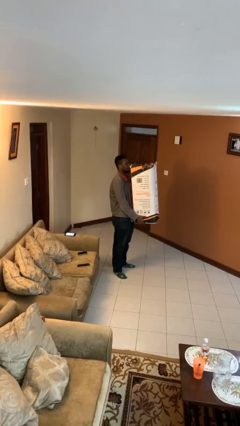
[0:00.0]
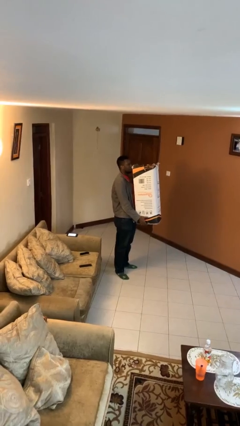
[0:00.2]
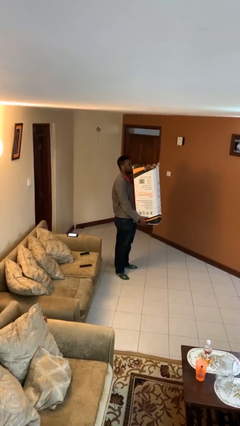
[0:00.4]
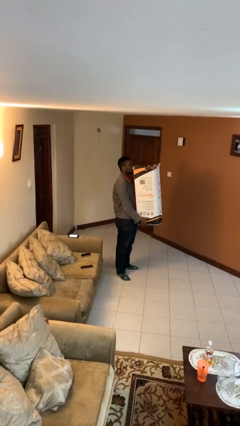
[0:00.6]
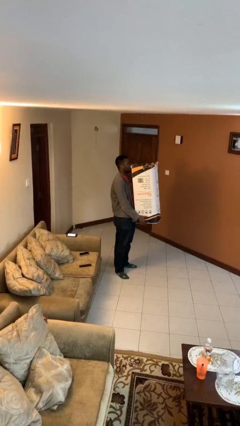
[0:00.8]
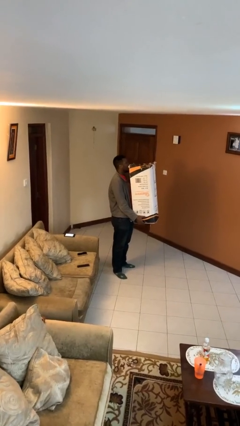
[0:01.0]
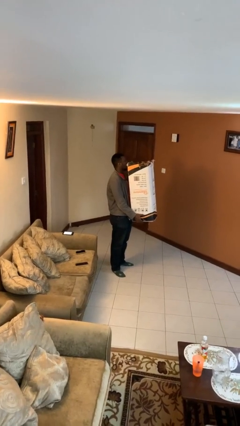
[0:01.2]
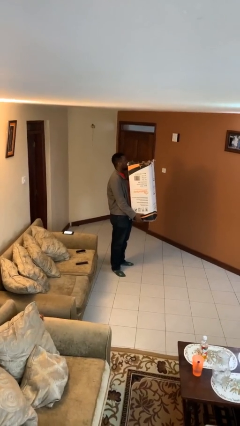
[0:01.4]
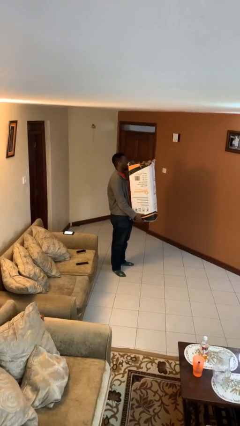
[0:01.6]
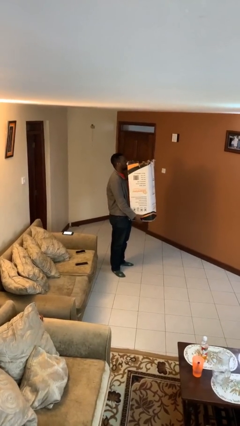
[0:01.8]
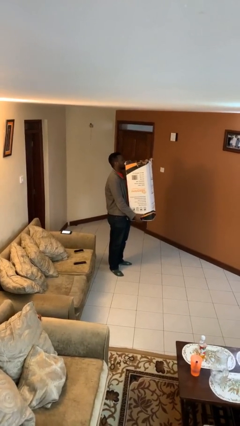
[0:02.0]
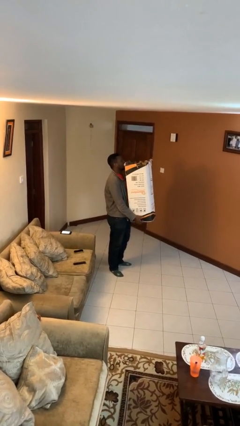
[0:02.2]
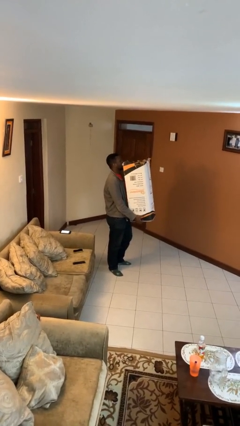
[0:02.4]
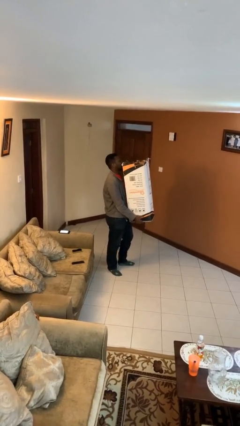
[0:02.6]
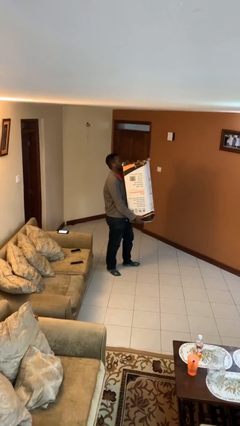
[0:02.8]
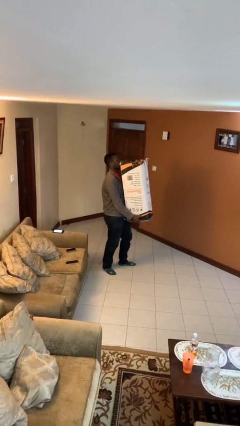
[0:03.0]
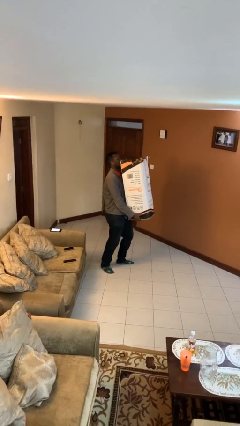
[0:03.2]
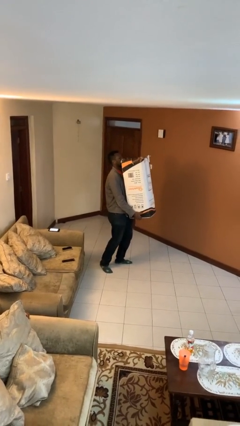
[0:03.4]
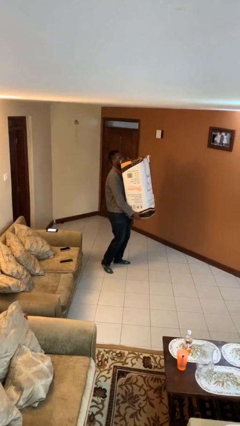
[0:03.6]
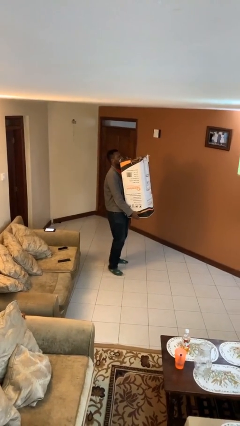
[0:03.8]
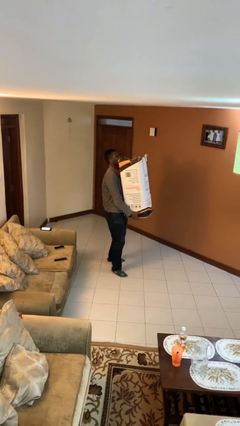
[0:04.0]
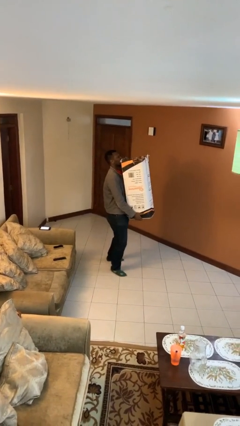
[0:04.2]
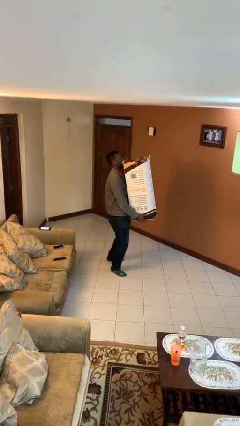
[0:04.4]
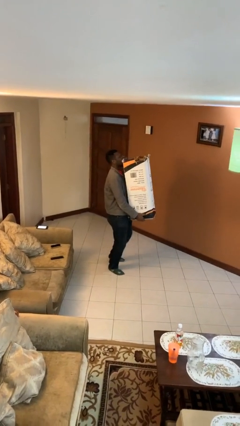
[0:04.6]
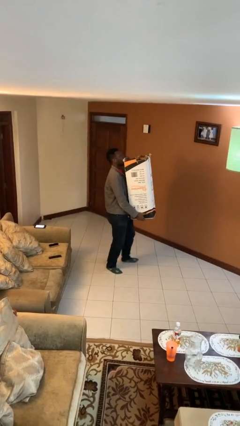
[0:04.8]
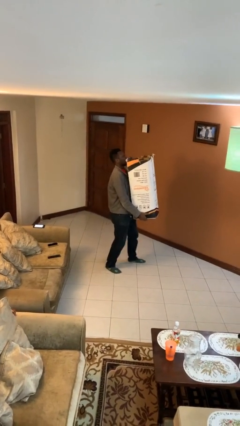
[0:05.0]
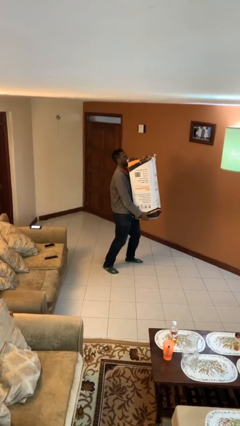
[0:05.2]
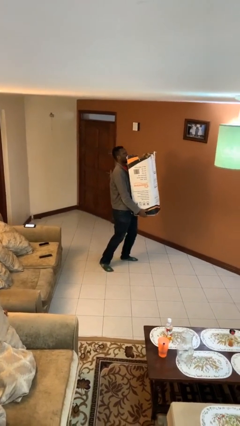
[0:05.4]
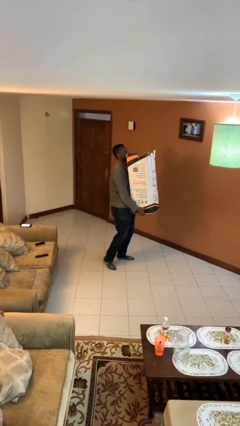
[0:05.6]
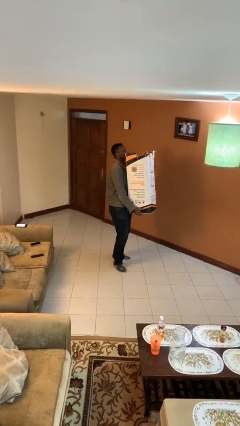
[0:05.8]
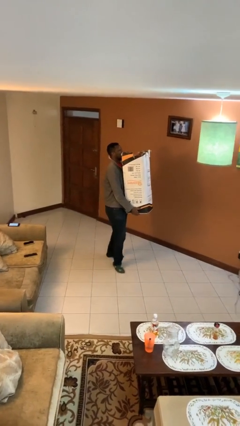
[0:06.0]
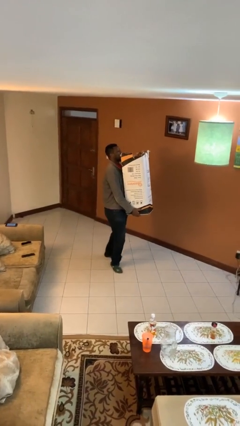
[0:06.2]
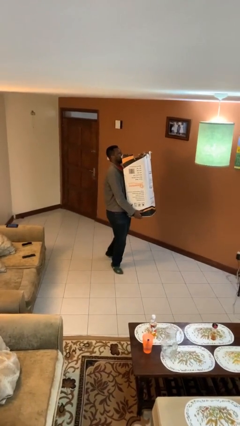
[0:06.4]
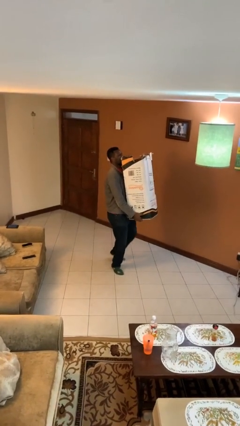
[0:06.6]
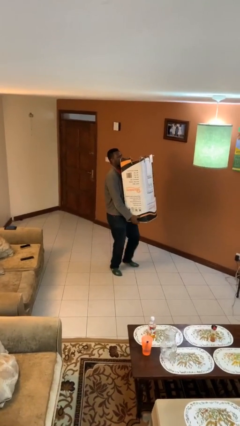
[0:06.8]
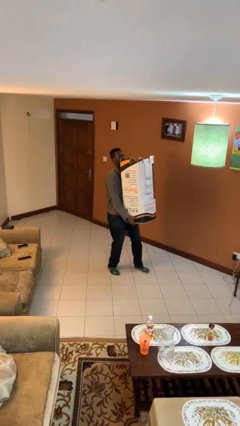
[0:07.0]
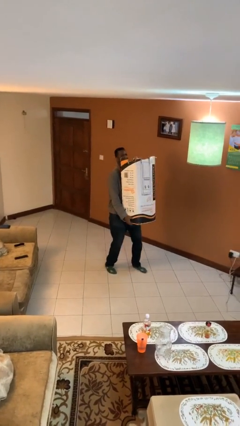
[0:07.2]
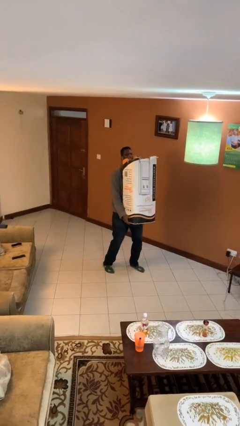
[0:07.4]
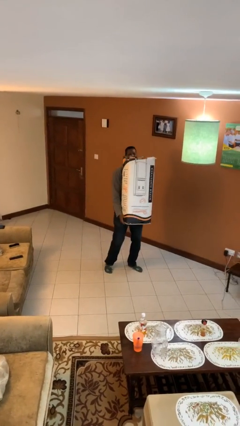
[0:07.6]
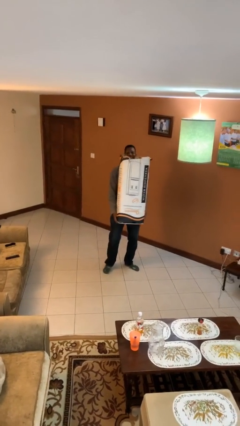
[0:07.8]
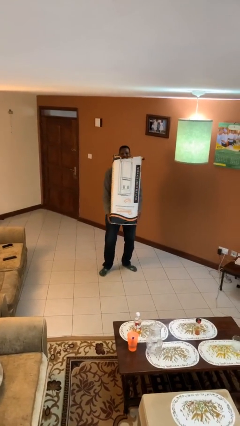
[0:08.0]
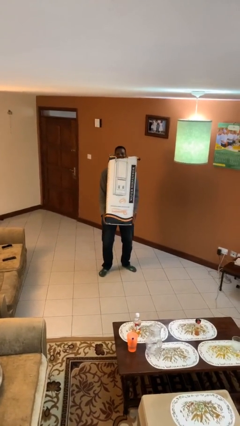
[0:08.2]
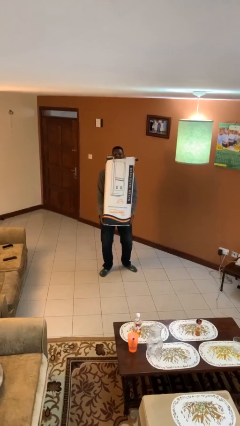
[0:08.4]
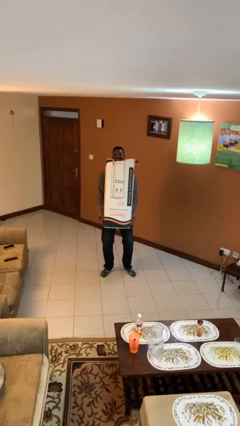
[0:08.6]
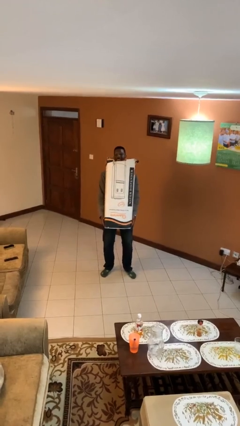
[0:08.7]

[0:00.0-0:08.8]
person carries heavy object

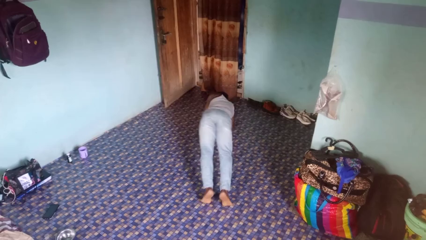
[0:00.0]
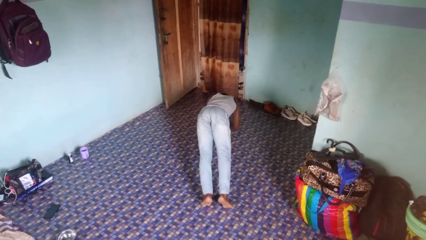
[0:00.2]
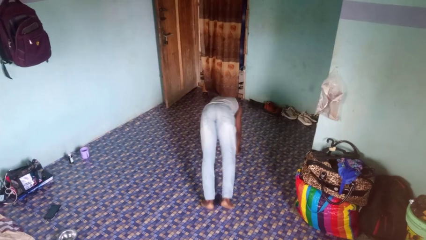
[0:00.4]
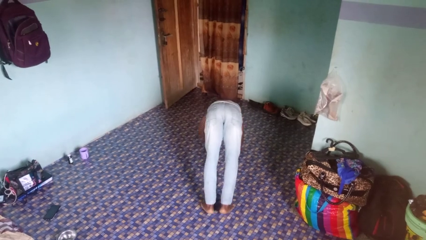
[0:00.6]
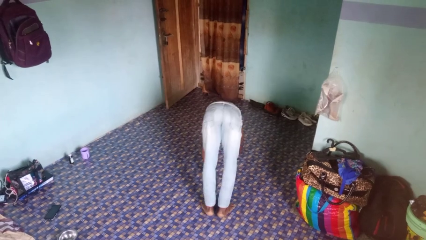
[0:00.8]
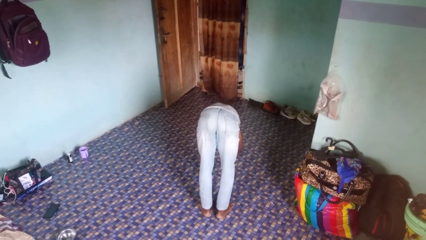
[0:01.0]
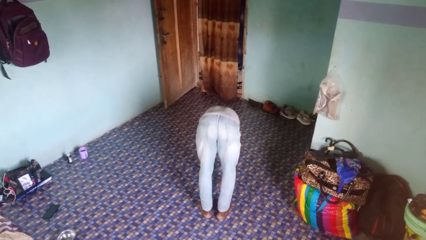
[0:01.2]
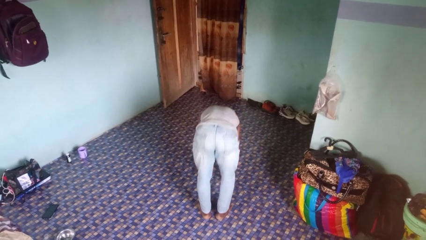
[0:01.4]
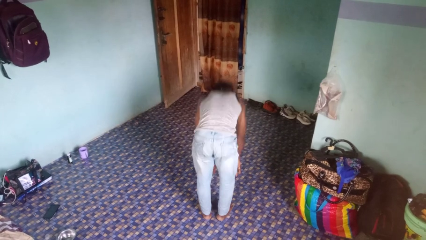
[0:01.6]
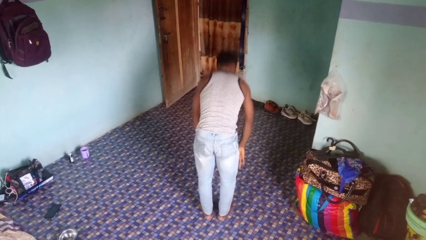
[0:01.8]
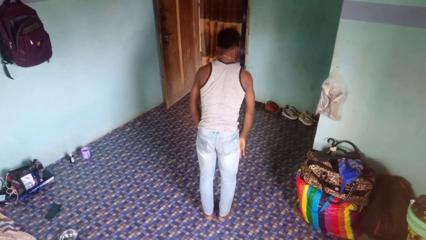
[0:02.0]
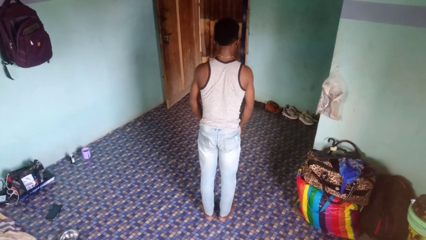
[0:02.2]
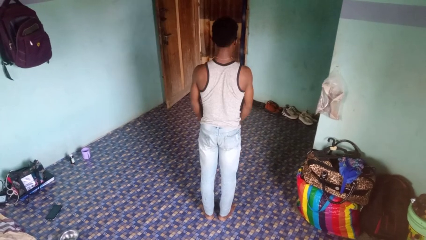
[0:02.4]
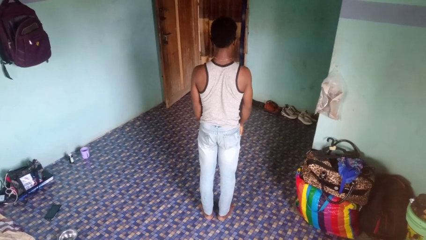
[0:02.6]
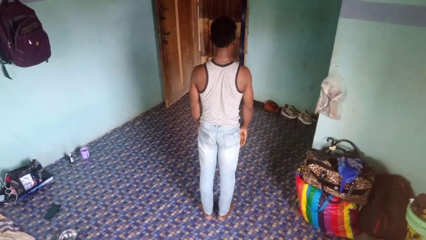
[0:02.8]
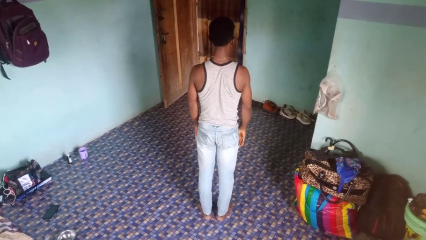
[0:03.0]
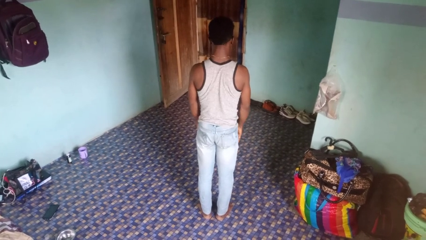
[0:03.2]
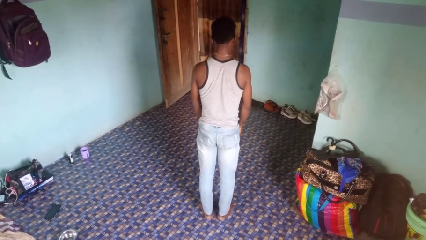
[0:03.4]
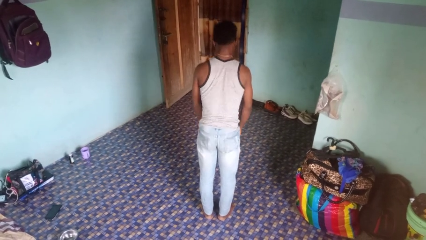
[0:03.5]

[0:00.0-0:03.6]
person stands up from floor

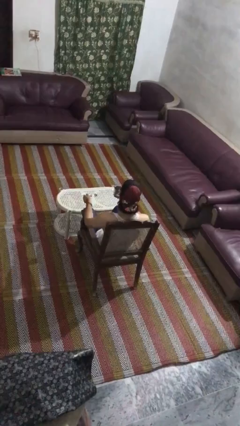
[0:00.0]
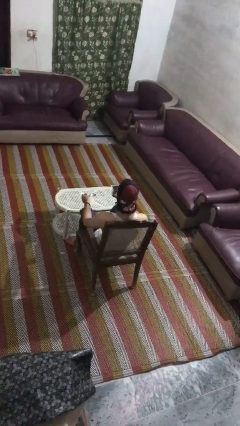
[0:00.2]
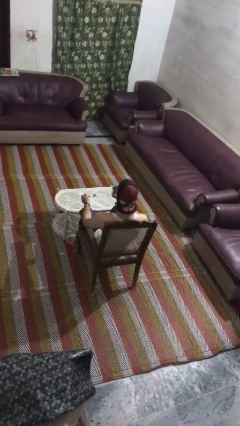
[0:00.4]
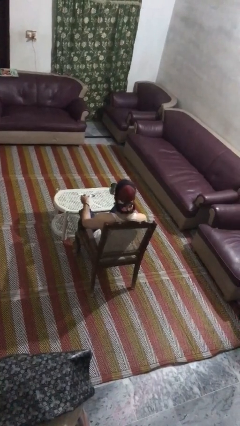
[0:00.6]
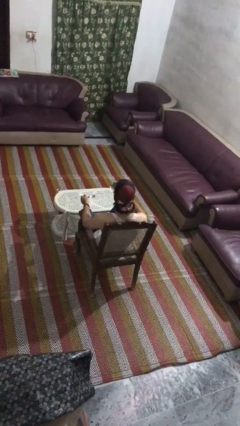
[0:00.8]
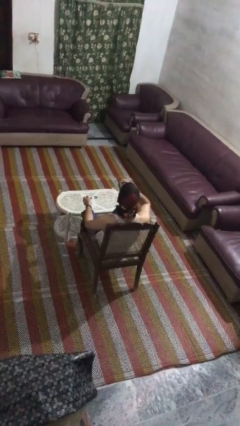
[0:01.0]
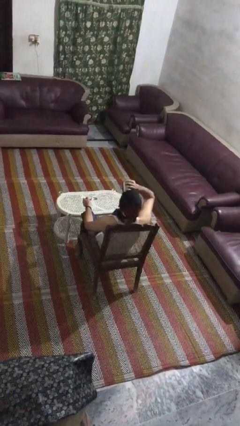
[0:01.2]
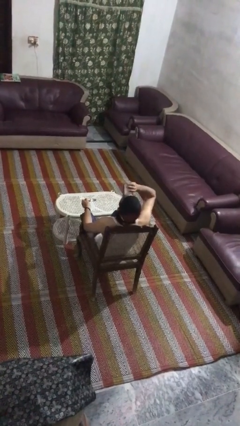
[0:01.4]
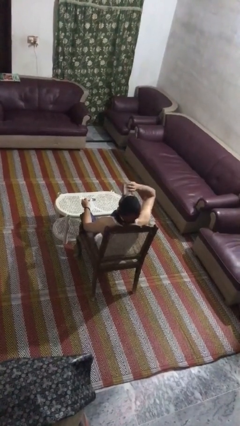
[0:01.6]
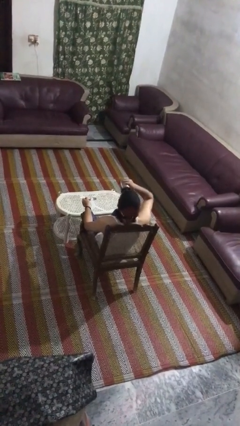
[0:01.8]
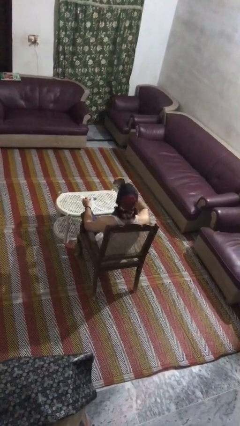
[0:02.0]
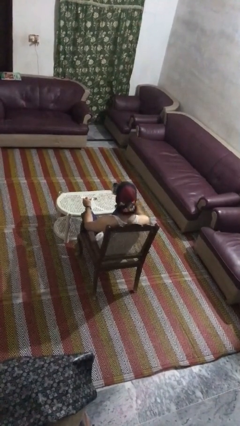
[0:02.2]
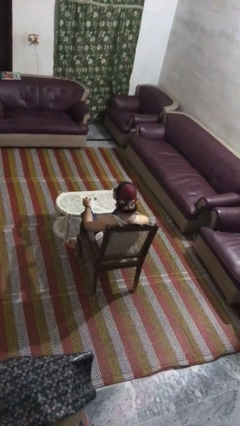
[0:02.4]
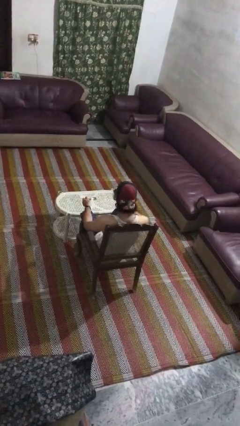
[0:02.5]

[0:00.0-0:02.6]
person drinks from mug

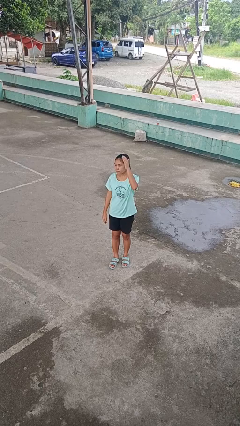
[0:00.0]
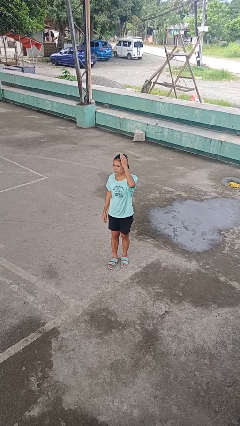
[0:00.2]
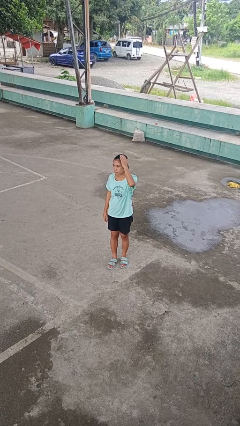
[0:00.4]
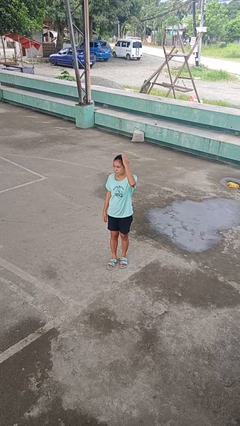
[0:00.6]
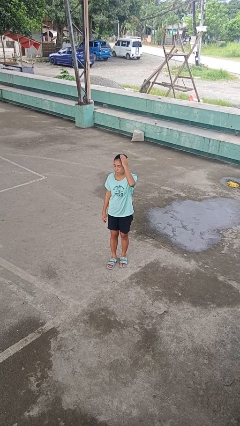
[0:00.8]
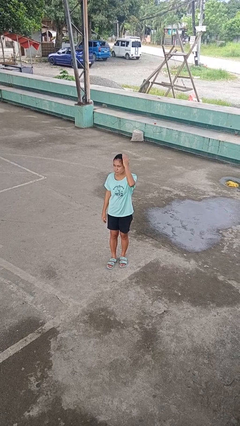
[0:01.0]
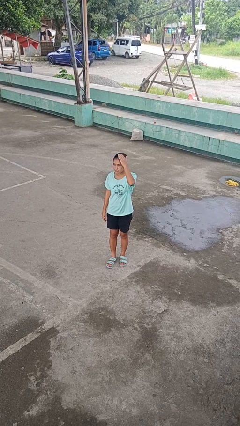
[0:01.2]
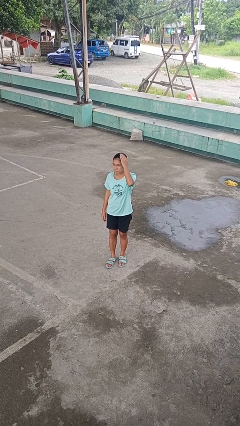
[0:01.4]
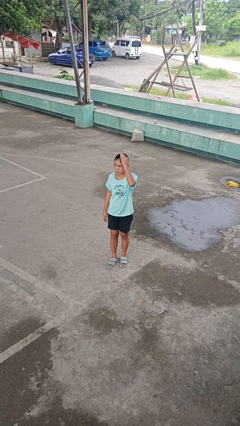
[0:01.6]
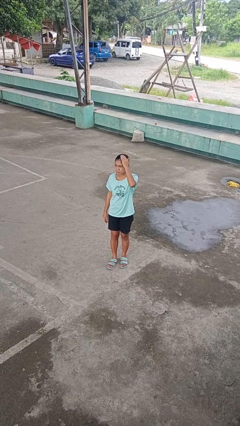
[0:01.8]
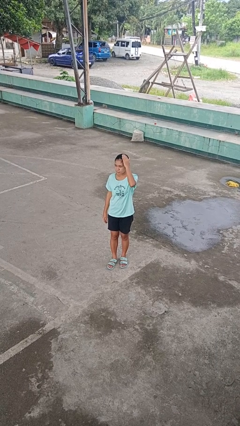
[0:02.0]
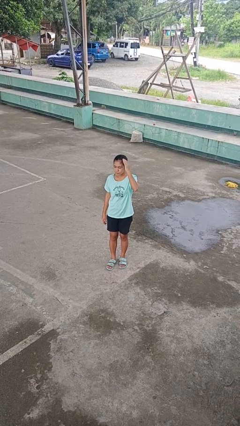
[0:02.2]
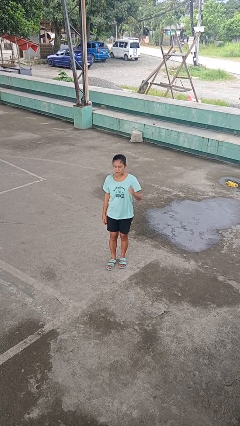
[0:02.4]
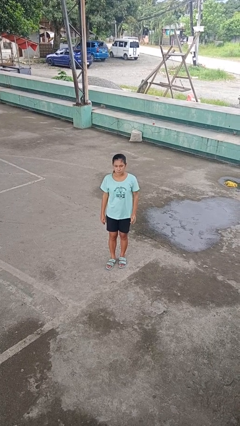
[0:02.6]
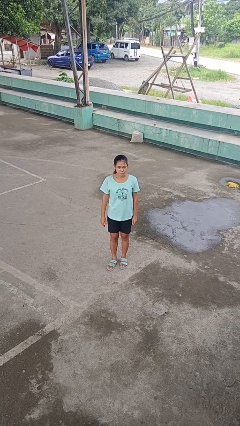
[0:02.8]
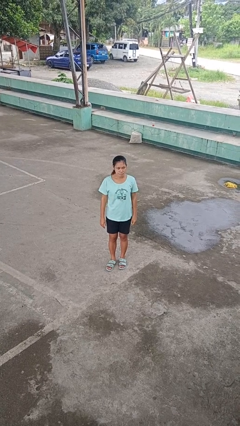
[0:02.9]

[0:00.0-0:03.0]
person pats head
